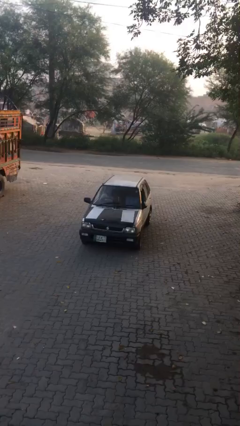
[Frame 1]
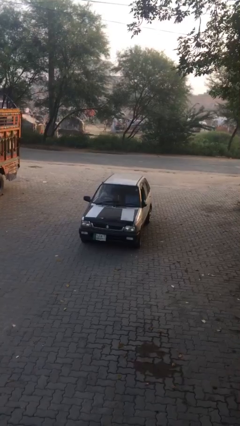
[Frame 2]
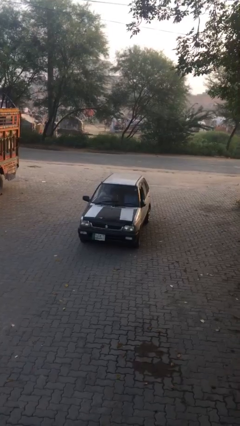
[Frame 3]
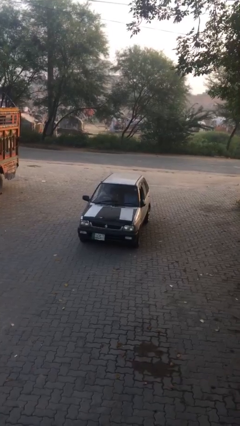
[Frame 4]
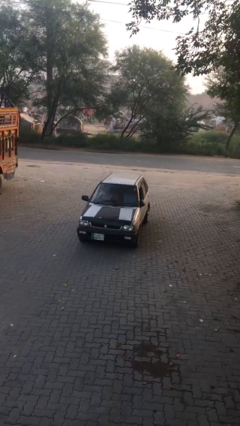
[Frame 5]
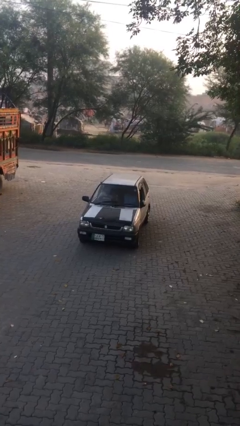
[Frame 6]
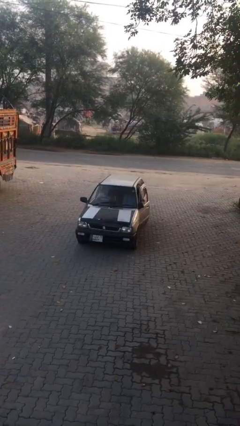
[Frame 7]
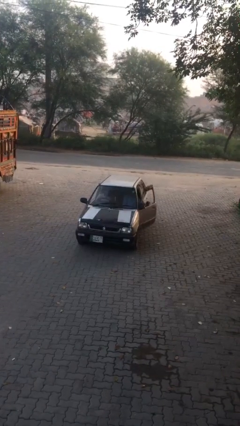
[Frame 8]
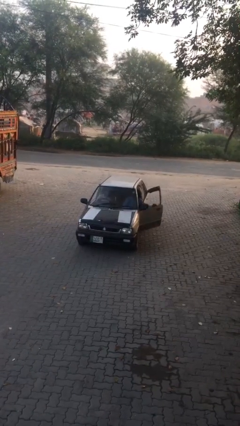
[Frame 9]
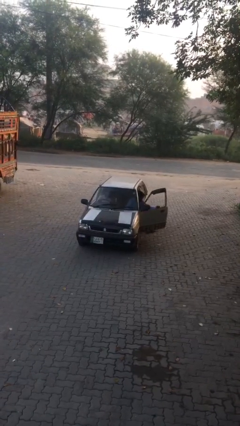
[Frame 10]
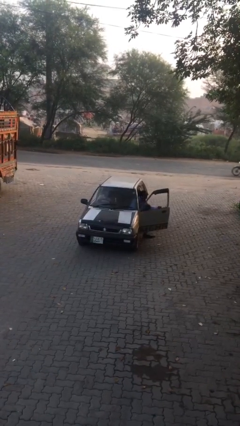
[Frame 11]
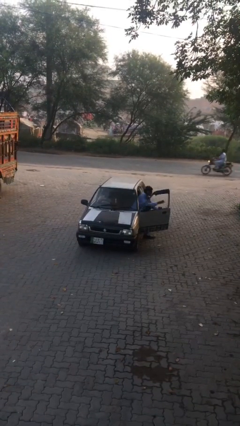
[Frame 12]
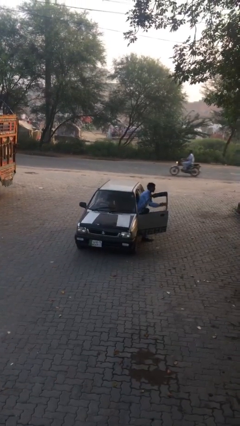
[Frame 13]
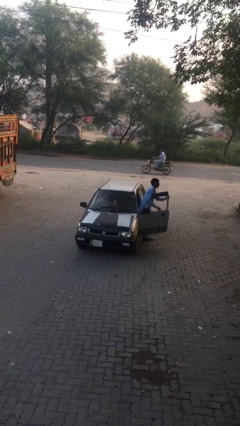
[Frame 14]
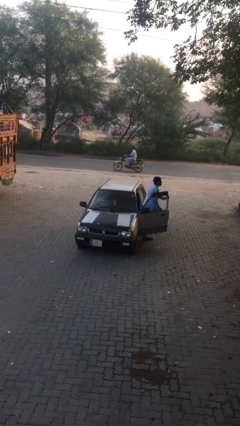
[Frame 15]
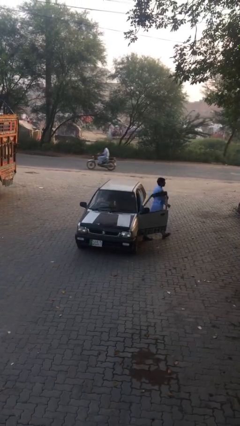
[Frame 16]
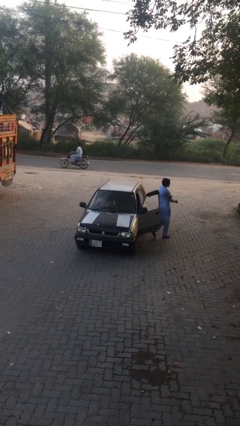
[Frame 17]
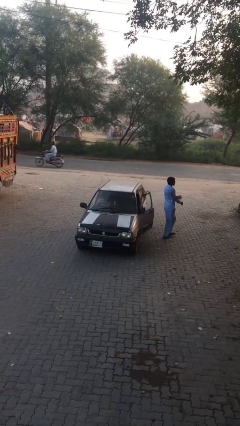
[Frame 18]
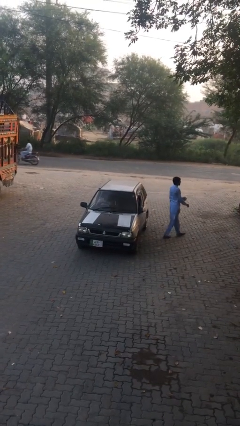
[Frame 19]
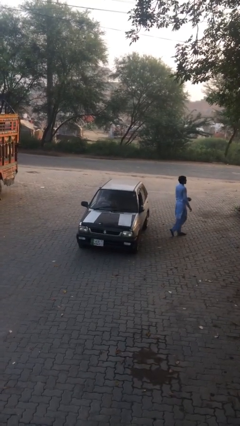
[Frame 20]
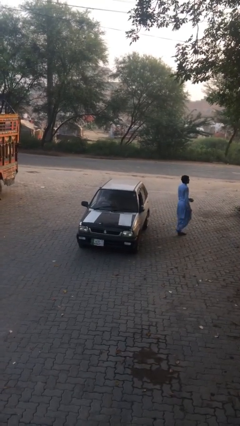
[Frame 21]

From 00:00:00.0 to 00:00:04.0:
car drops off person

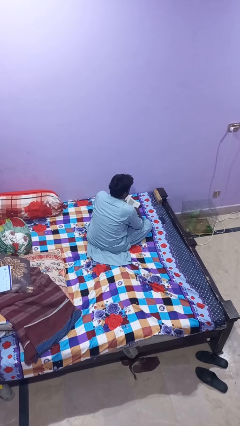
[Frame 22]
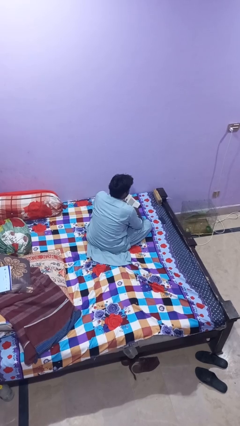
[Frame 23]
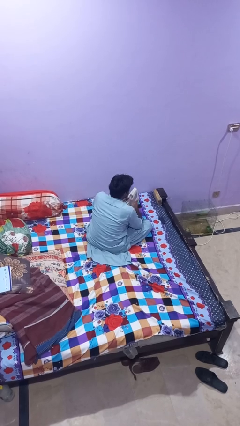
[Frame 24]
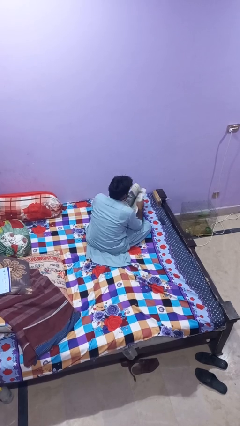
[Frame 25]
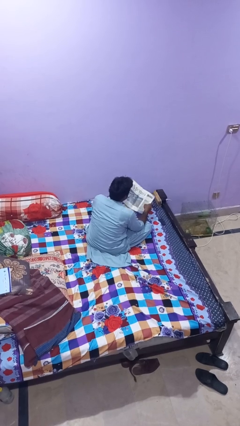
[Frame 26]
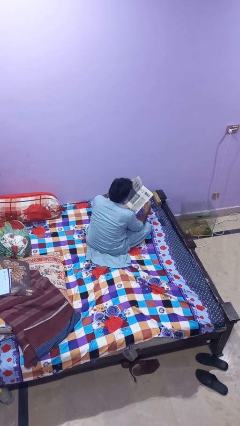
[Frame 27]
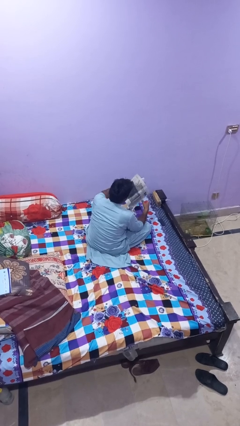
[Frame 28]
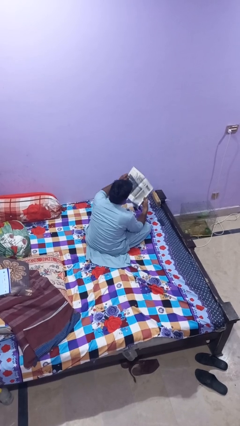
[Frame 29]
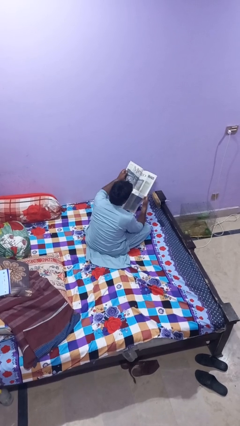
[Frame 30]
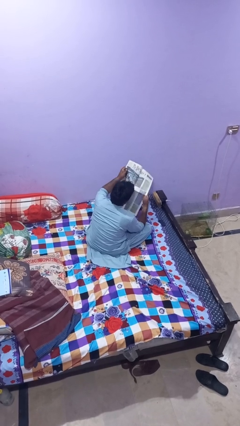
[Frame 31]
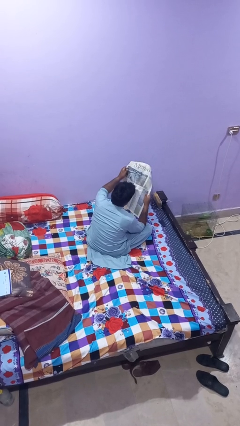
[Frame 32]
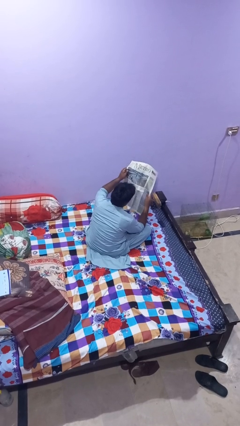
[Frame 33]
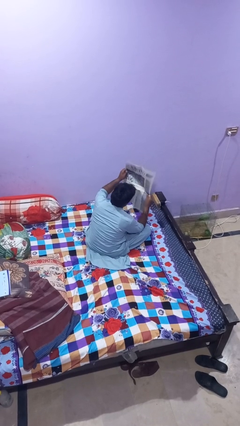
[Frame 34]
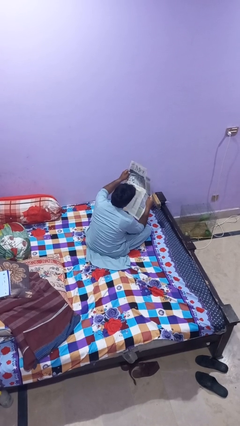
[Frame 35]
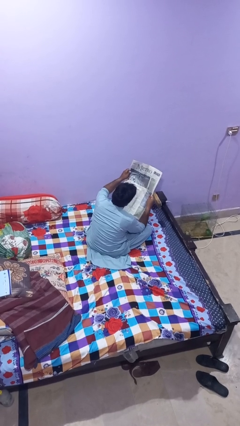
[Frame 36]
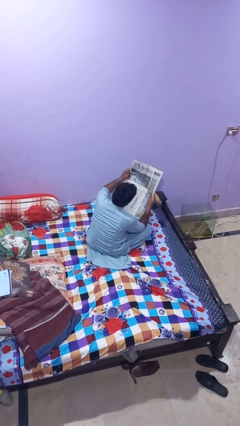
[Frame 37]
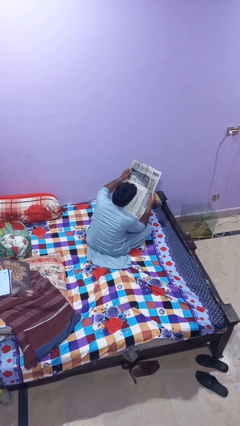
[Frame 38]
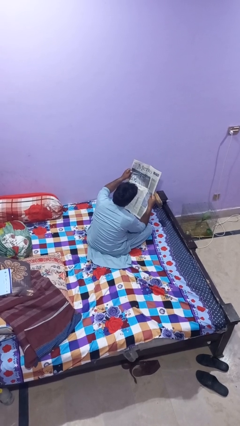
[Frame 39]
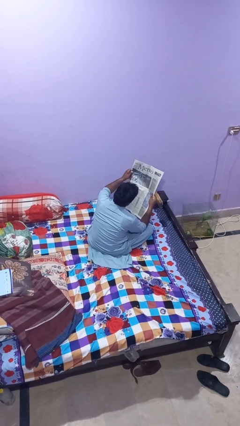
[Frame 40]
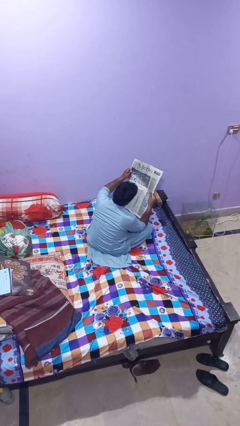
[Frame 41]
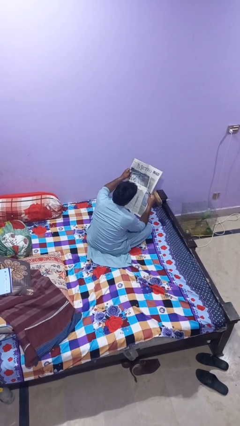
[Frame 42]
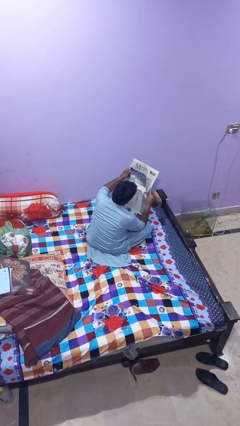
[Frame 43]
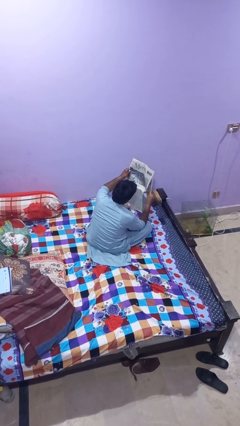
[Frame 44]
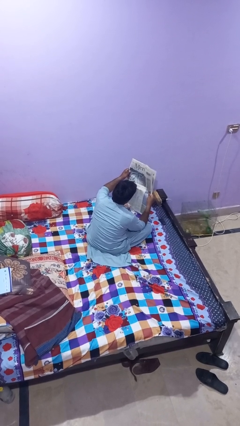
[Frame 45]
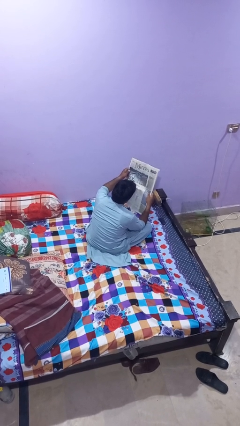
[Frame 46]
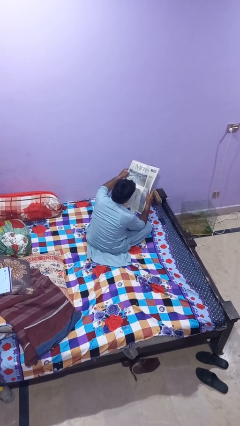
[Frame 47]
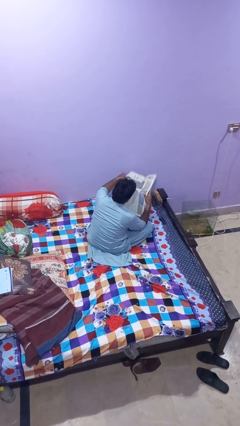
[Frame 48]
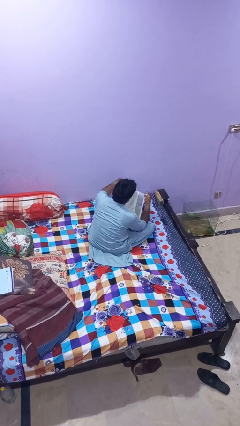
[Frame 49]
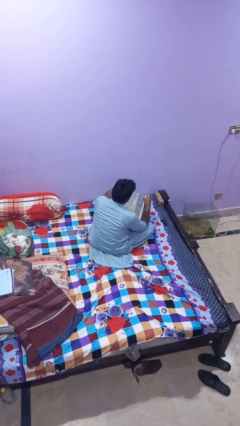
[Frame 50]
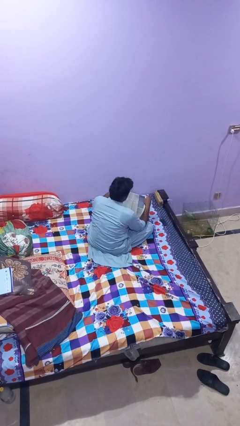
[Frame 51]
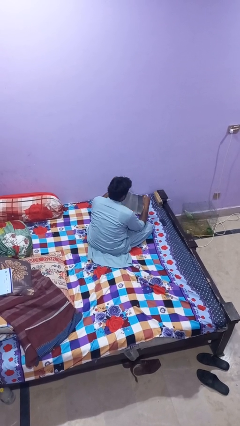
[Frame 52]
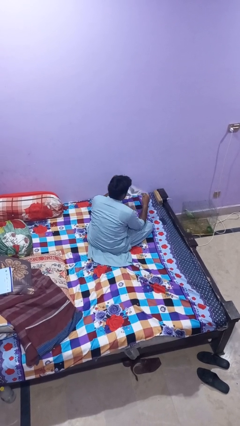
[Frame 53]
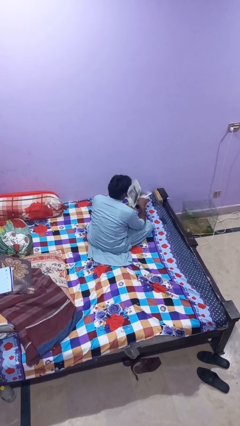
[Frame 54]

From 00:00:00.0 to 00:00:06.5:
person reads newspaper

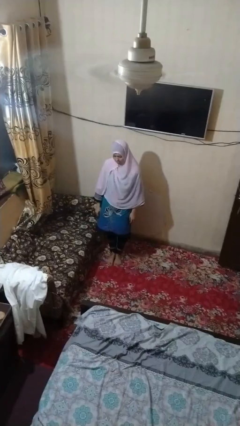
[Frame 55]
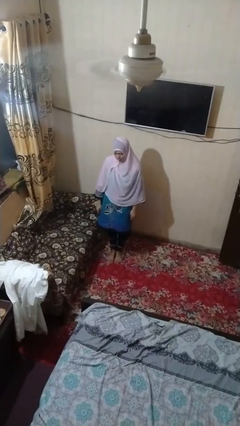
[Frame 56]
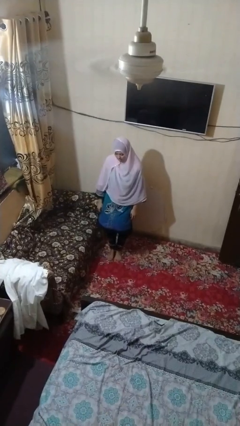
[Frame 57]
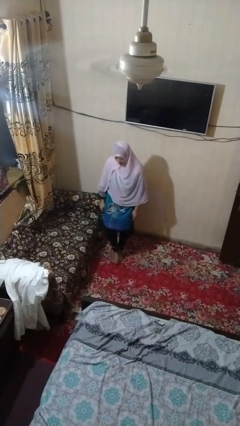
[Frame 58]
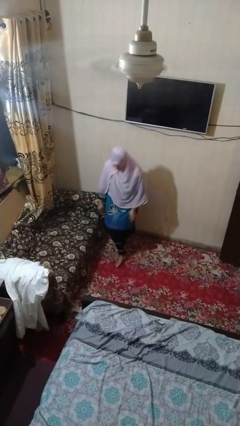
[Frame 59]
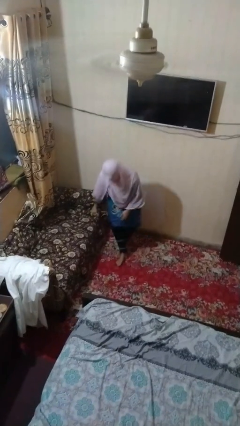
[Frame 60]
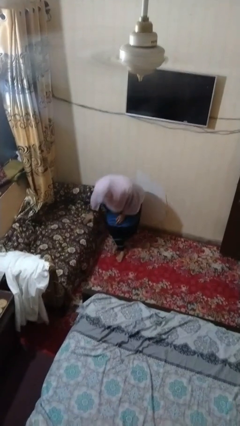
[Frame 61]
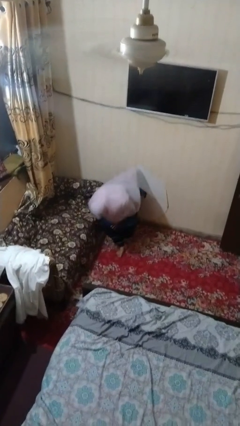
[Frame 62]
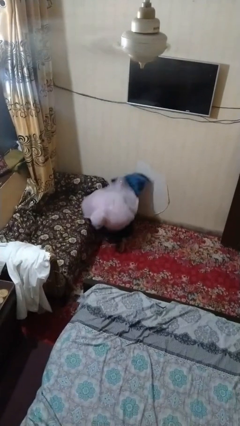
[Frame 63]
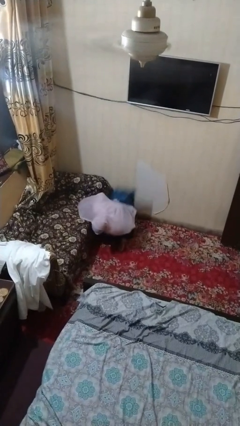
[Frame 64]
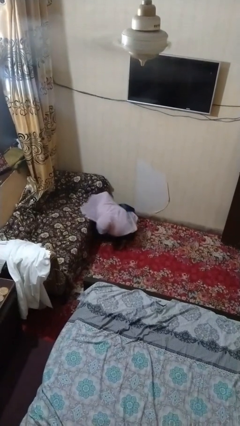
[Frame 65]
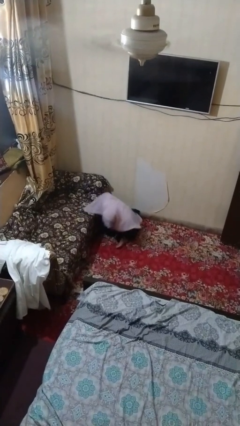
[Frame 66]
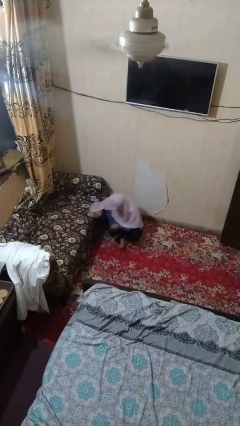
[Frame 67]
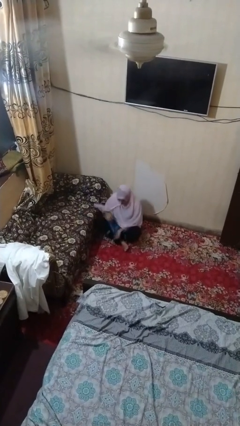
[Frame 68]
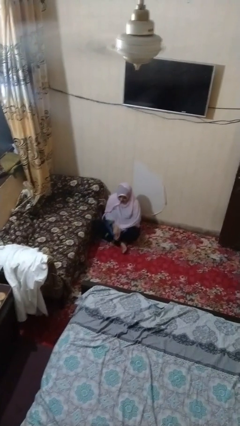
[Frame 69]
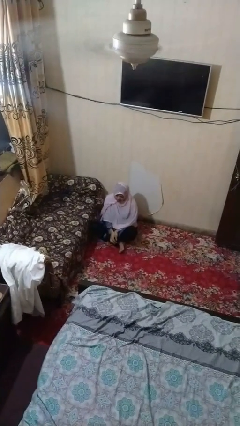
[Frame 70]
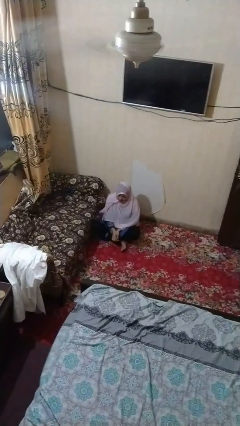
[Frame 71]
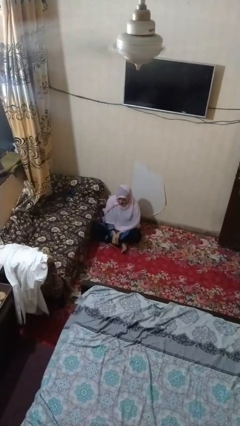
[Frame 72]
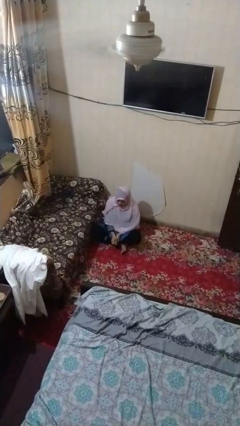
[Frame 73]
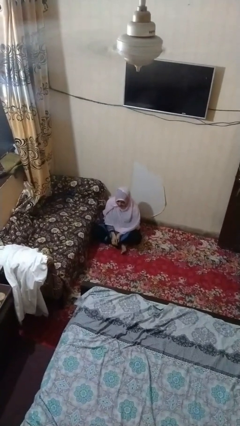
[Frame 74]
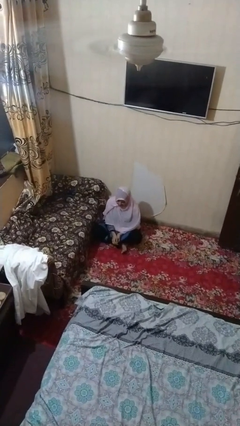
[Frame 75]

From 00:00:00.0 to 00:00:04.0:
person sits crisscross

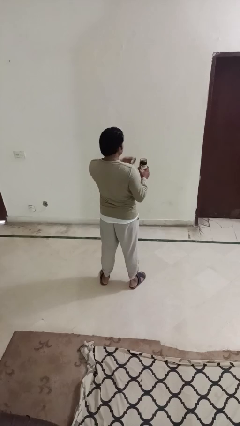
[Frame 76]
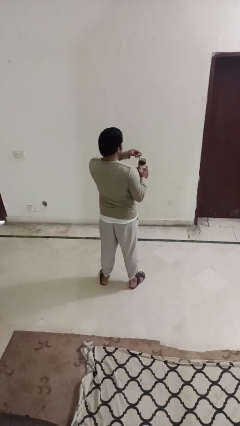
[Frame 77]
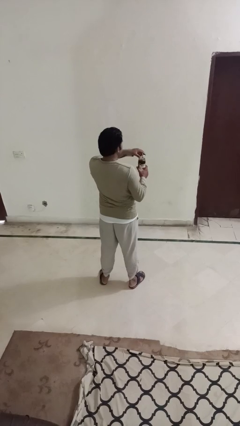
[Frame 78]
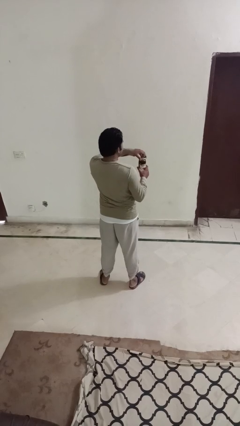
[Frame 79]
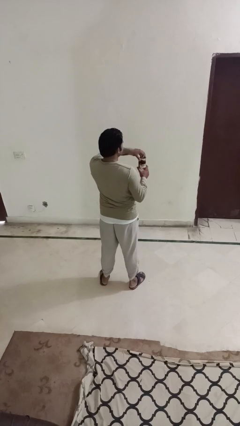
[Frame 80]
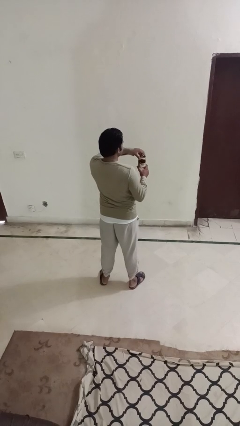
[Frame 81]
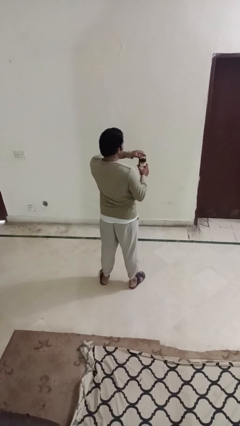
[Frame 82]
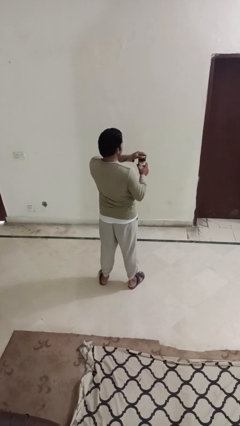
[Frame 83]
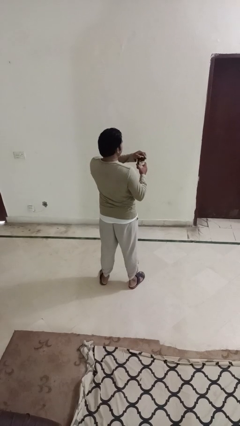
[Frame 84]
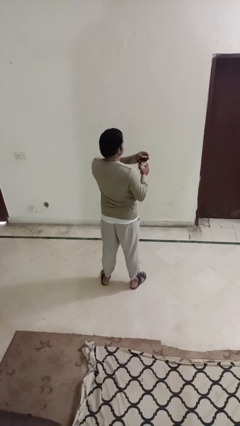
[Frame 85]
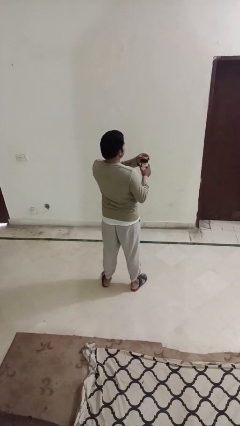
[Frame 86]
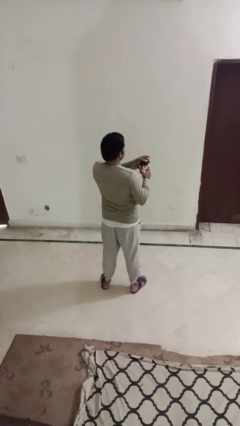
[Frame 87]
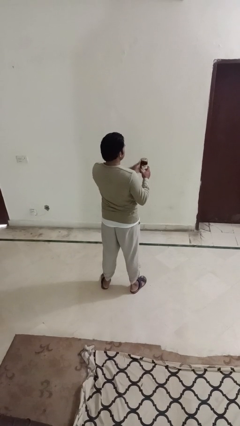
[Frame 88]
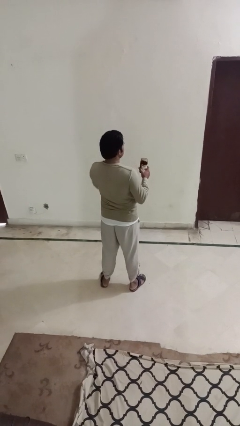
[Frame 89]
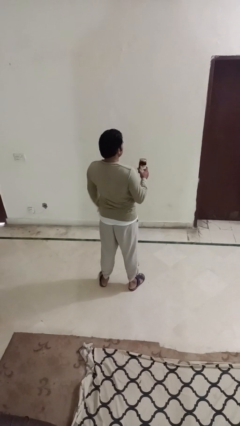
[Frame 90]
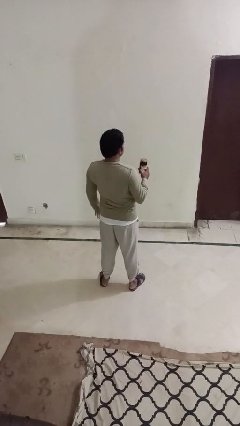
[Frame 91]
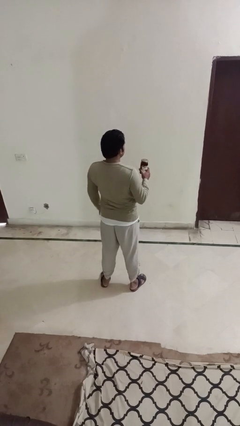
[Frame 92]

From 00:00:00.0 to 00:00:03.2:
person closes jar

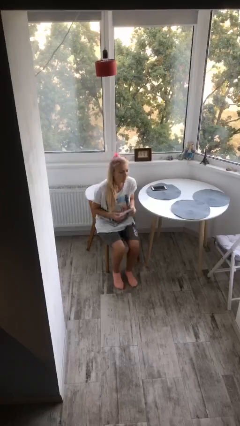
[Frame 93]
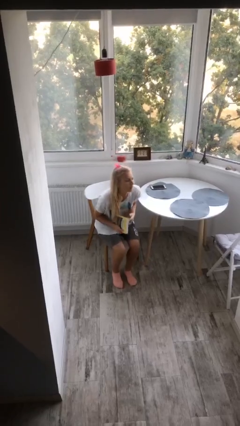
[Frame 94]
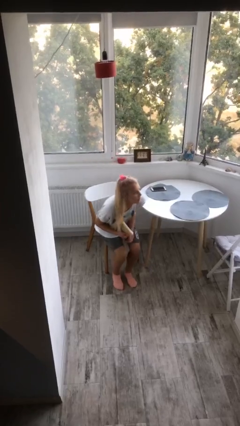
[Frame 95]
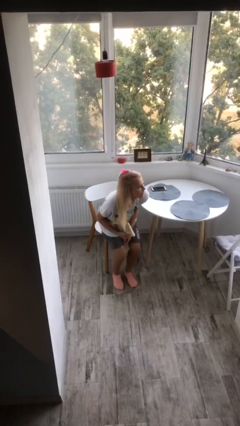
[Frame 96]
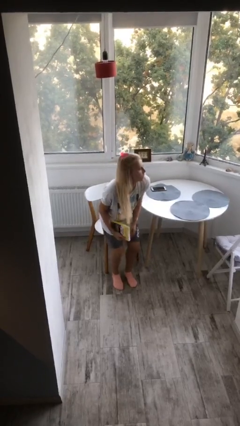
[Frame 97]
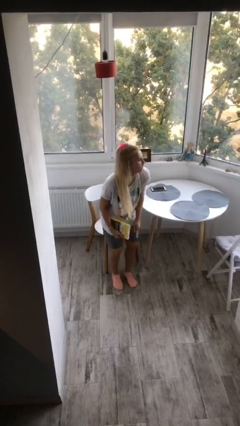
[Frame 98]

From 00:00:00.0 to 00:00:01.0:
person stands up
